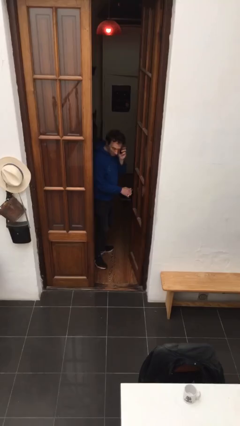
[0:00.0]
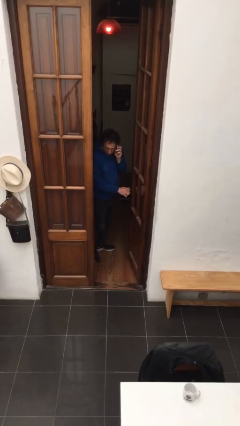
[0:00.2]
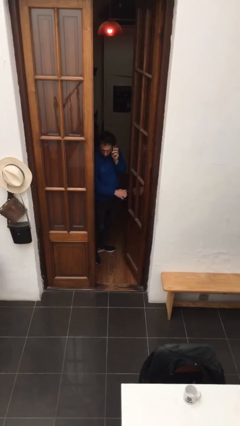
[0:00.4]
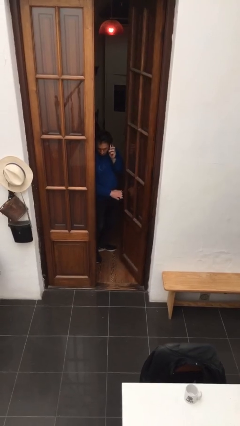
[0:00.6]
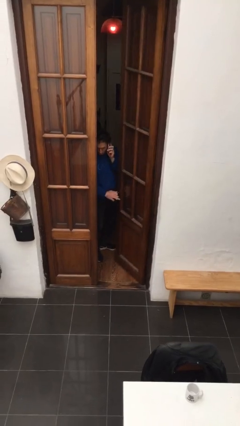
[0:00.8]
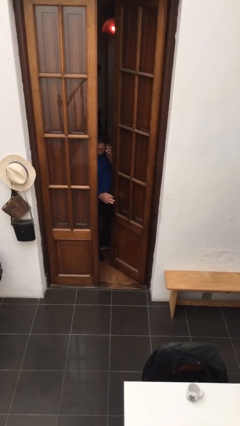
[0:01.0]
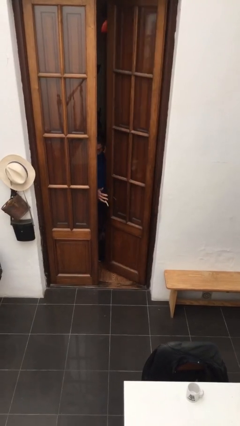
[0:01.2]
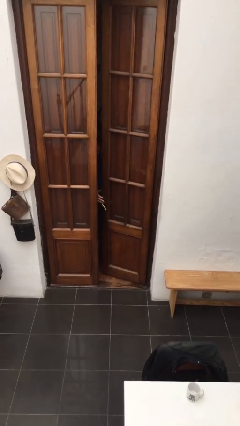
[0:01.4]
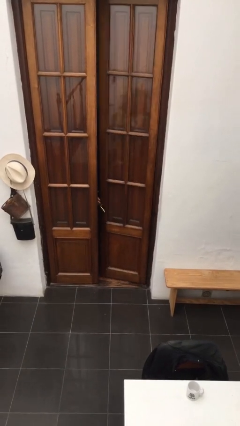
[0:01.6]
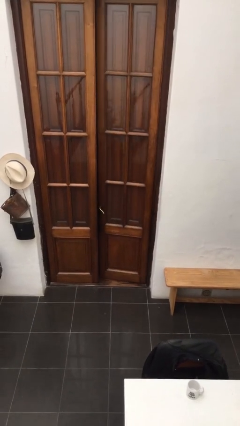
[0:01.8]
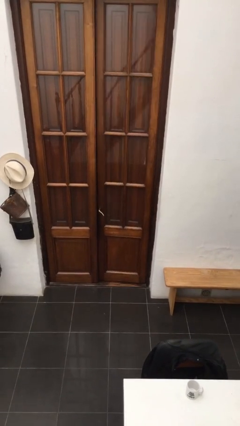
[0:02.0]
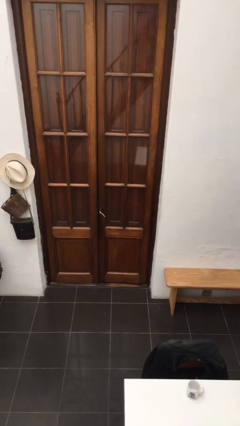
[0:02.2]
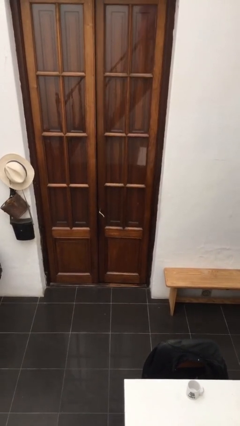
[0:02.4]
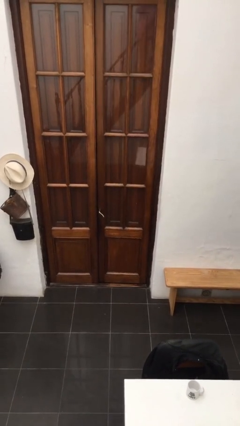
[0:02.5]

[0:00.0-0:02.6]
person closes facility door

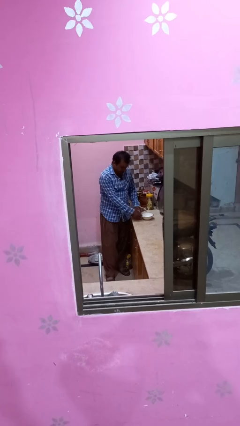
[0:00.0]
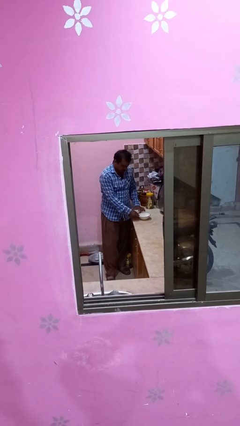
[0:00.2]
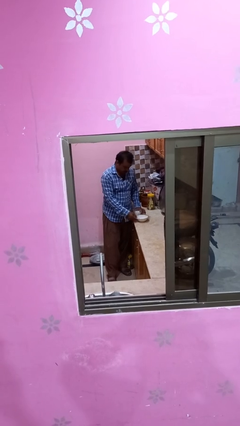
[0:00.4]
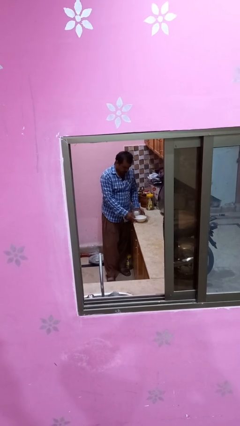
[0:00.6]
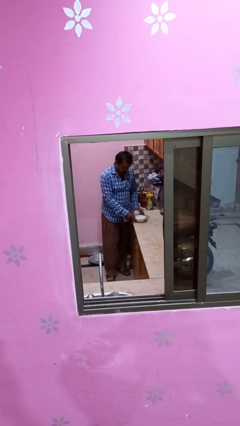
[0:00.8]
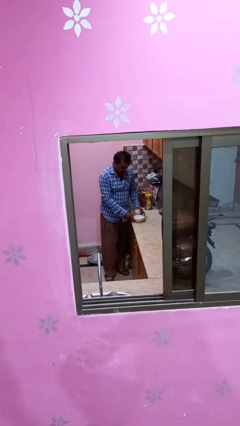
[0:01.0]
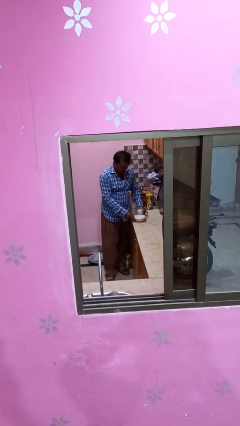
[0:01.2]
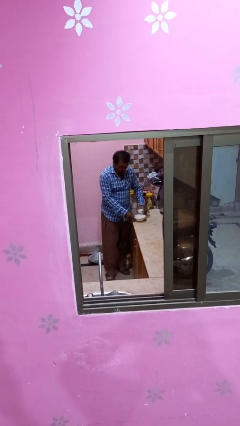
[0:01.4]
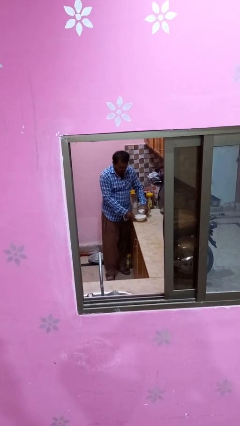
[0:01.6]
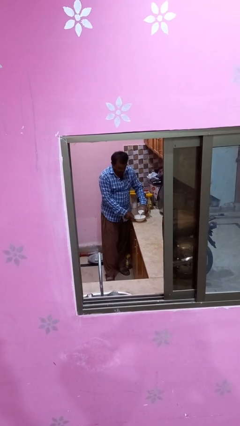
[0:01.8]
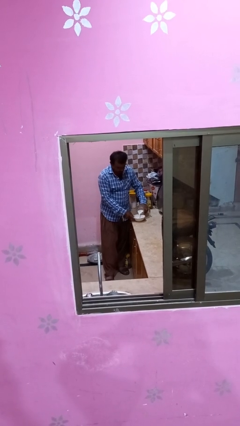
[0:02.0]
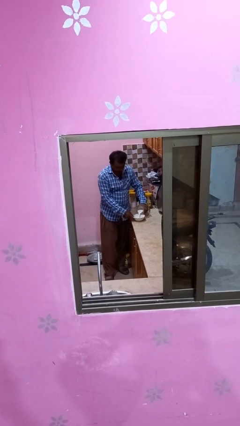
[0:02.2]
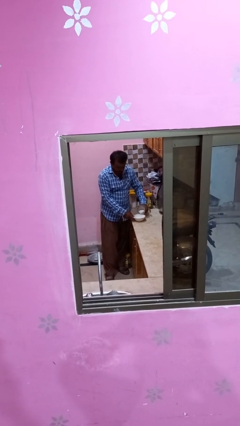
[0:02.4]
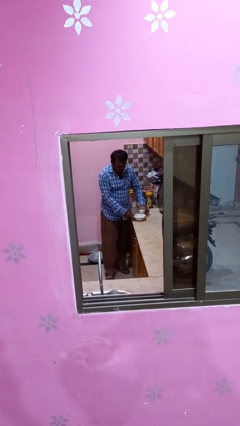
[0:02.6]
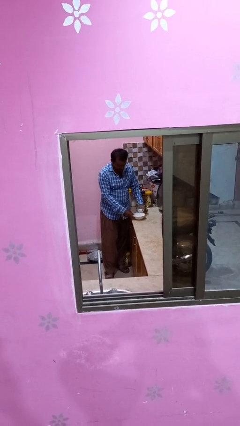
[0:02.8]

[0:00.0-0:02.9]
person pours into bowl

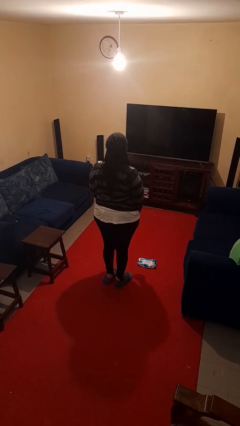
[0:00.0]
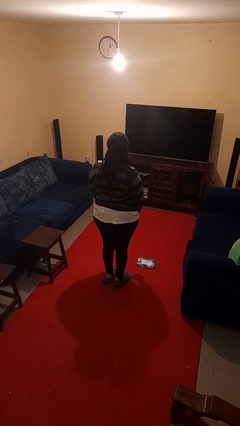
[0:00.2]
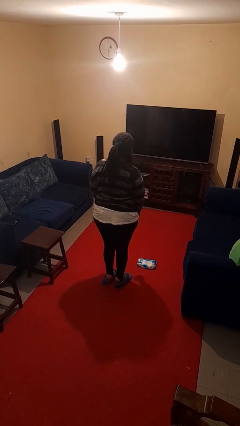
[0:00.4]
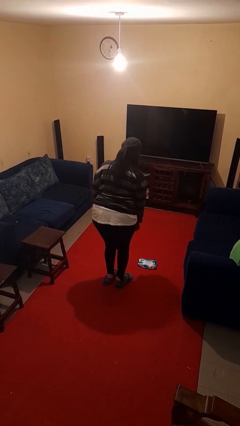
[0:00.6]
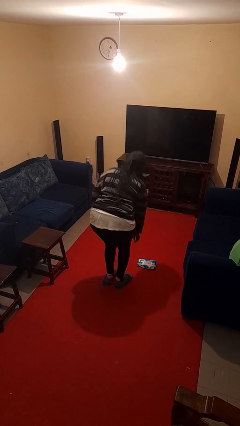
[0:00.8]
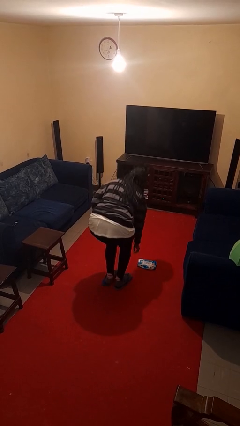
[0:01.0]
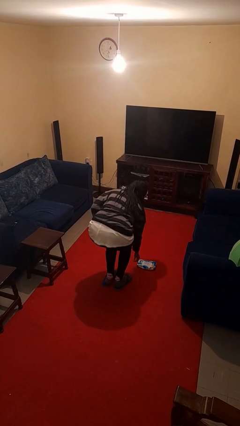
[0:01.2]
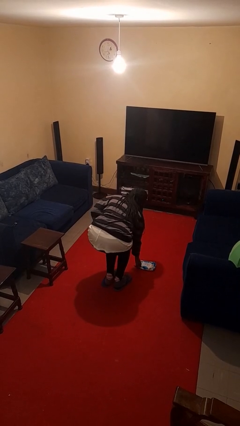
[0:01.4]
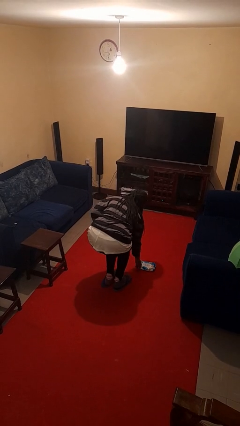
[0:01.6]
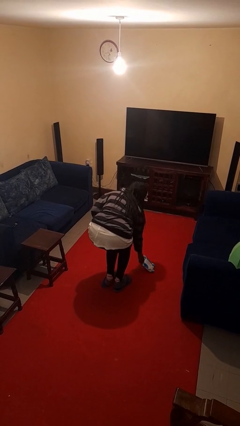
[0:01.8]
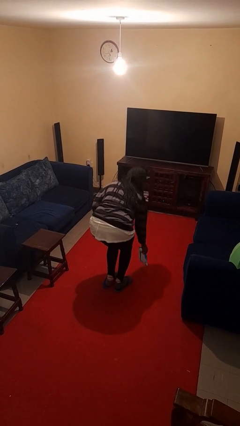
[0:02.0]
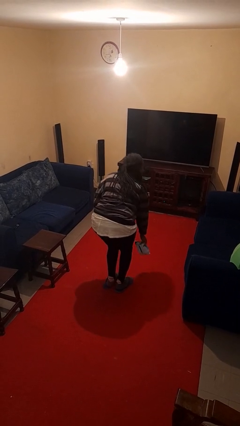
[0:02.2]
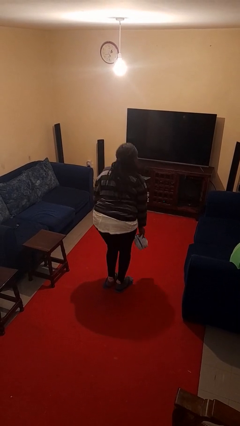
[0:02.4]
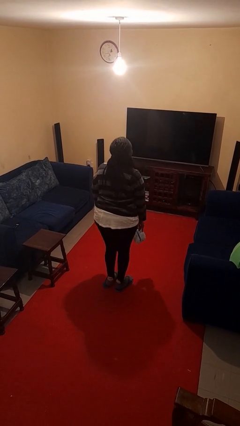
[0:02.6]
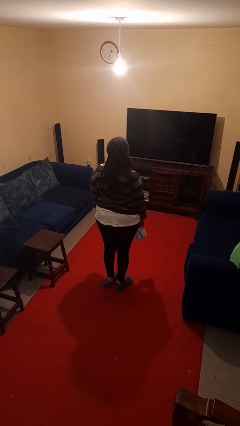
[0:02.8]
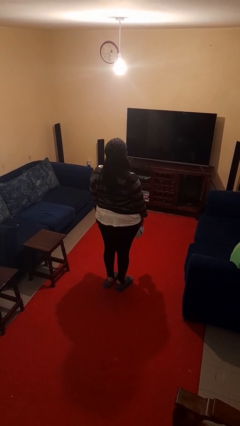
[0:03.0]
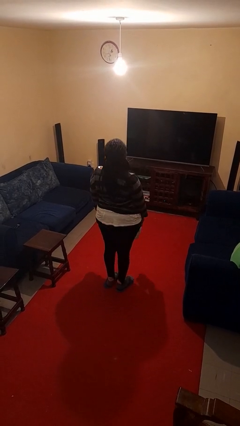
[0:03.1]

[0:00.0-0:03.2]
person picks up object from floor

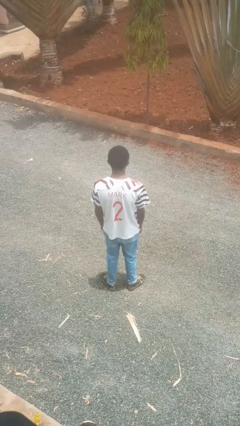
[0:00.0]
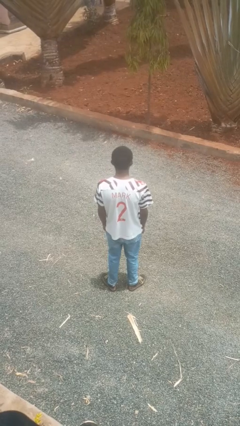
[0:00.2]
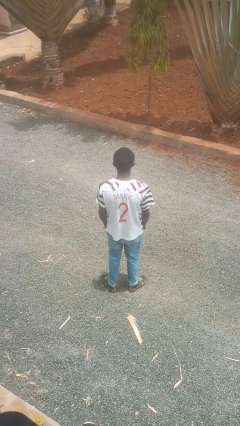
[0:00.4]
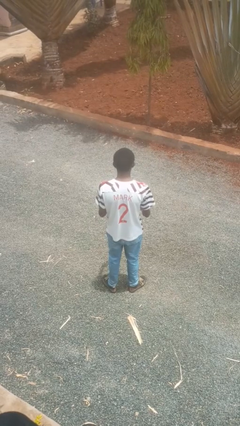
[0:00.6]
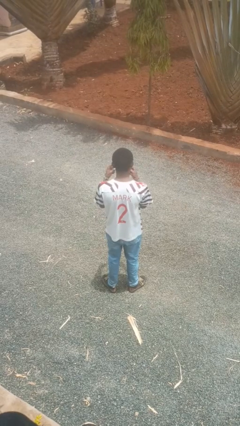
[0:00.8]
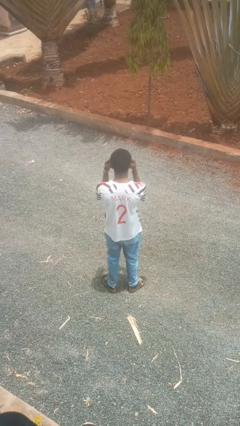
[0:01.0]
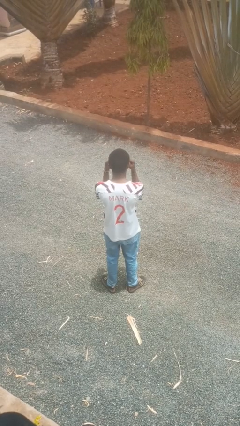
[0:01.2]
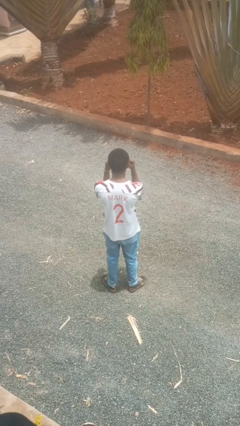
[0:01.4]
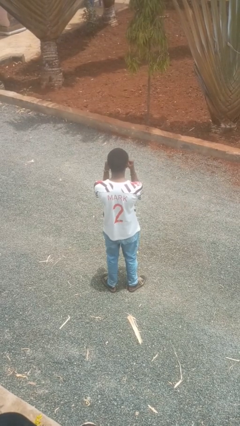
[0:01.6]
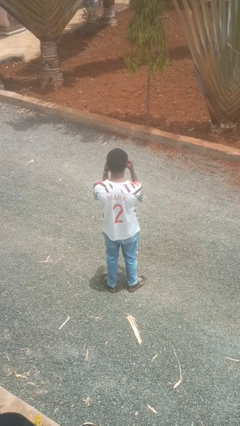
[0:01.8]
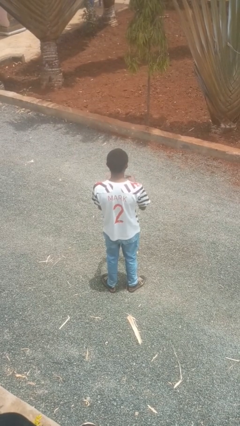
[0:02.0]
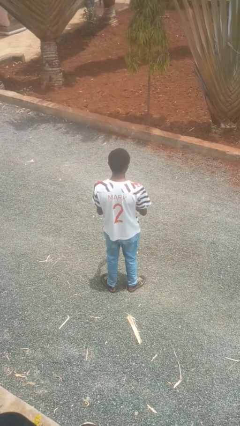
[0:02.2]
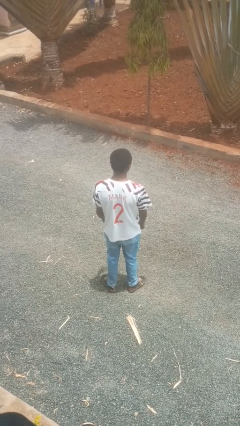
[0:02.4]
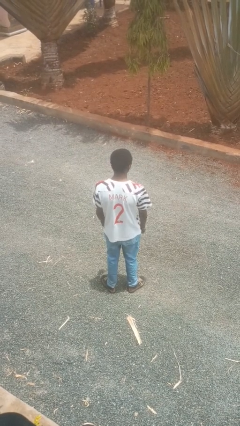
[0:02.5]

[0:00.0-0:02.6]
person gestures watch closely

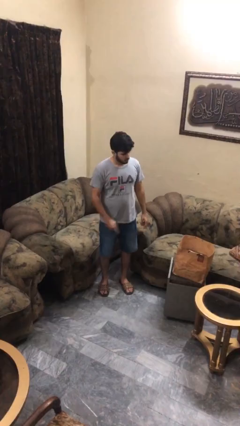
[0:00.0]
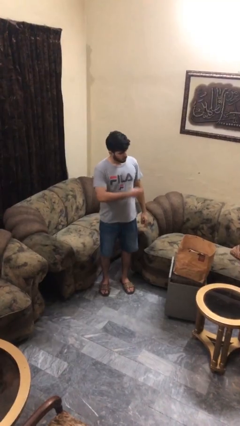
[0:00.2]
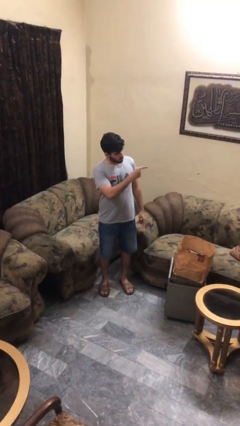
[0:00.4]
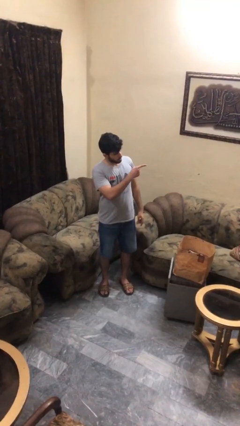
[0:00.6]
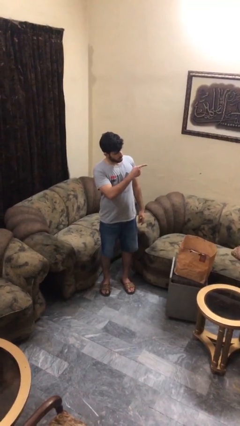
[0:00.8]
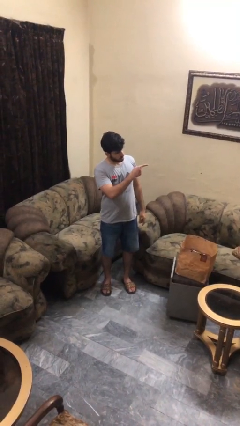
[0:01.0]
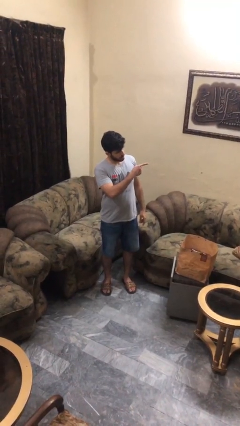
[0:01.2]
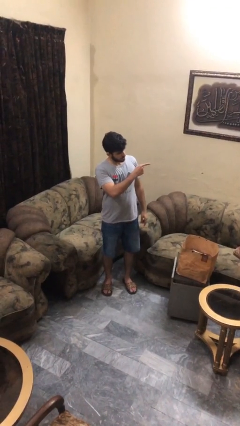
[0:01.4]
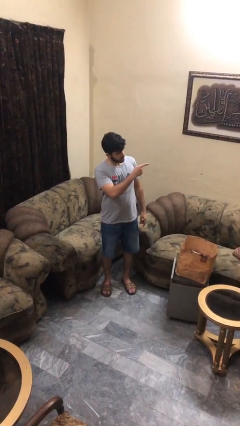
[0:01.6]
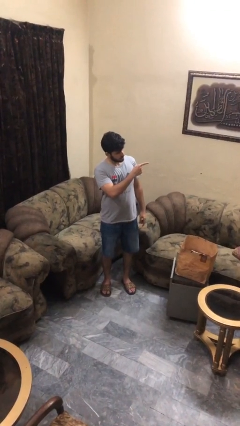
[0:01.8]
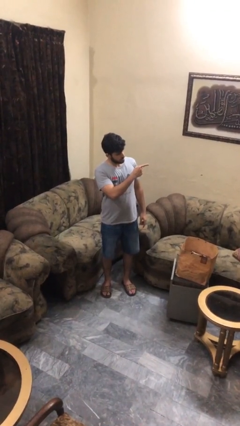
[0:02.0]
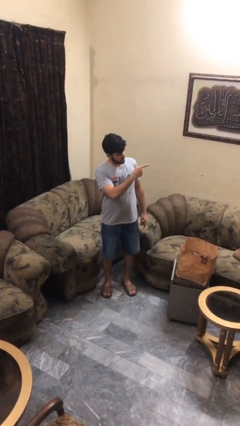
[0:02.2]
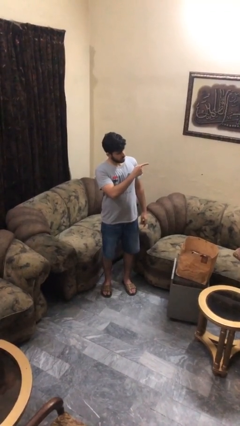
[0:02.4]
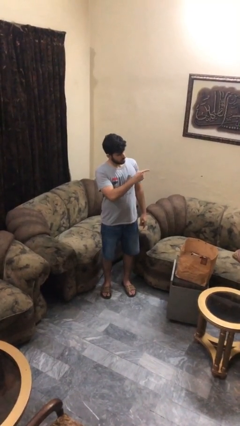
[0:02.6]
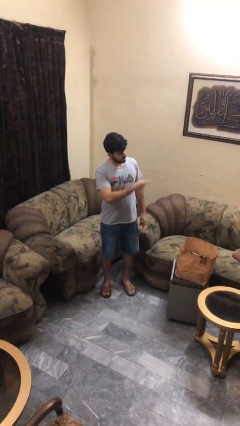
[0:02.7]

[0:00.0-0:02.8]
person points at person

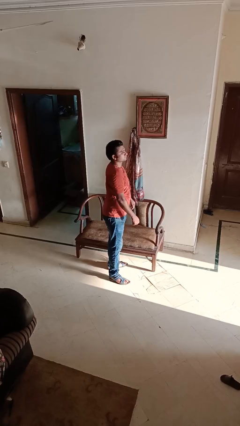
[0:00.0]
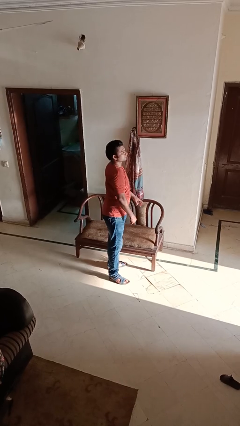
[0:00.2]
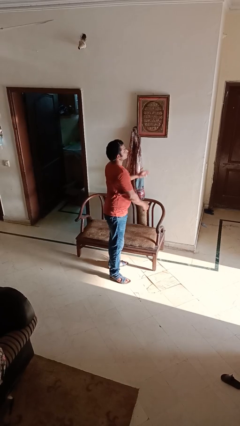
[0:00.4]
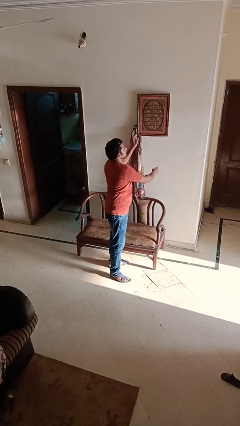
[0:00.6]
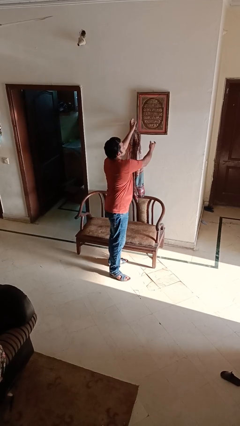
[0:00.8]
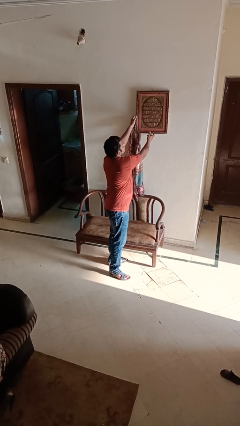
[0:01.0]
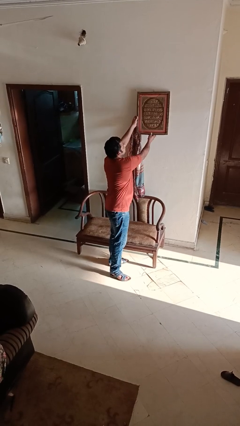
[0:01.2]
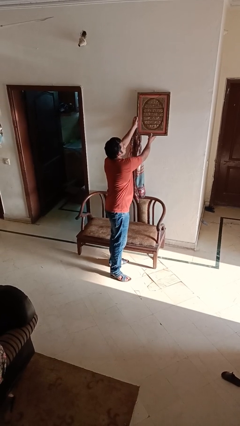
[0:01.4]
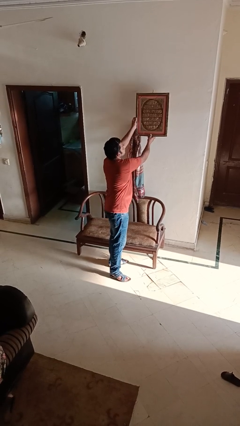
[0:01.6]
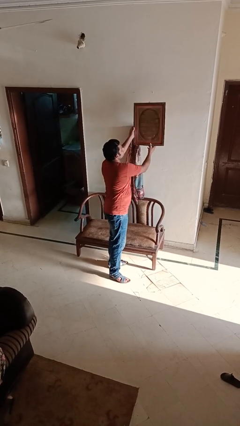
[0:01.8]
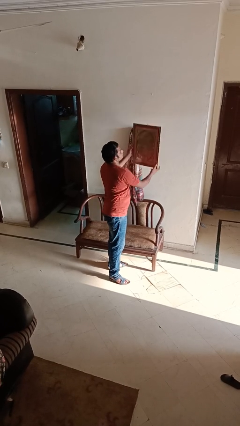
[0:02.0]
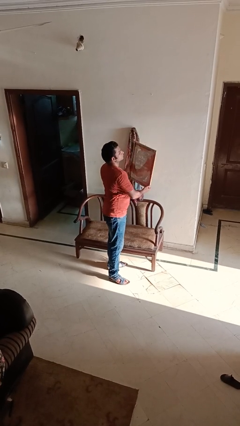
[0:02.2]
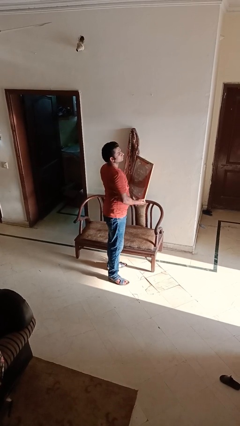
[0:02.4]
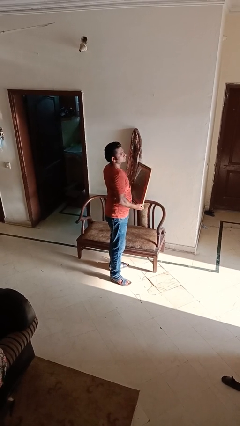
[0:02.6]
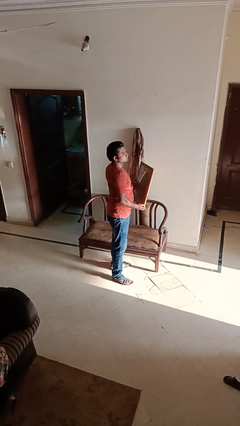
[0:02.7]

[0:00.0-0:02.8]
person takes down picture frame

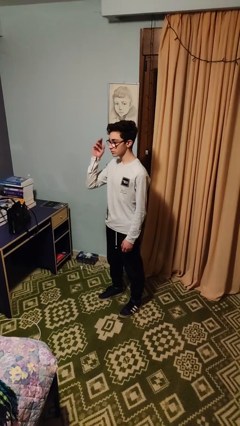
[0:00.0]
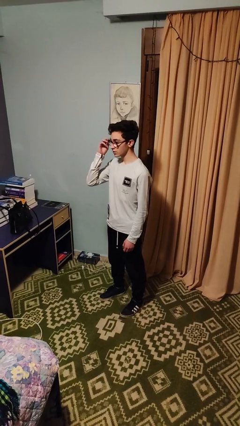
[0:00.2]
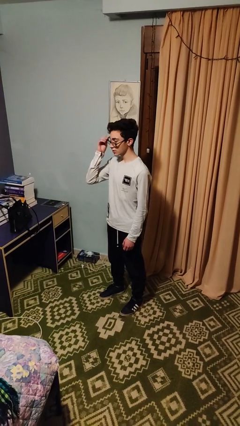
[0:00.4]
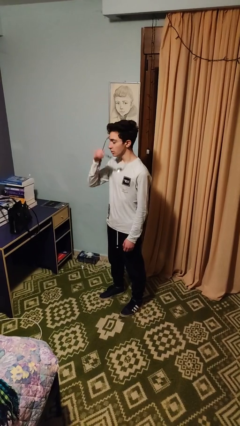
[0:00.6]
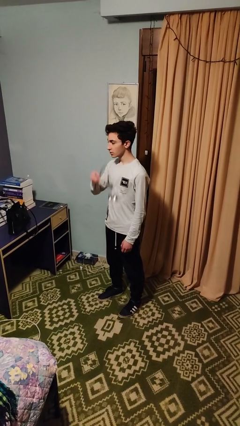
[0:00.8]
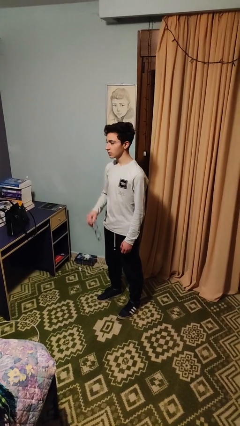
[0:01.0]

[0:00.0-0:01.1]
person takes off glasses
